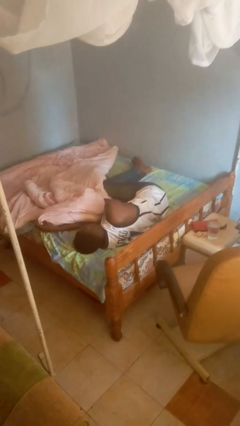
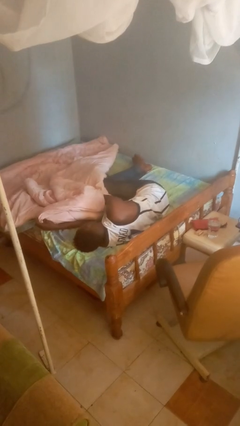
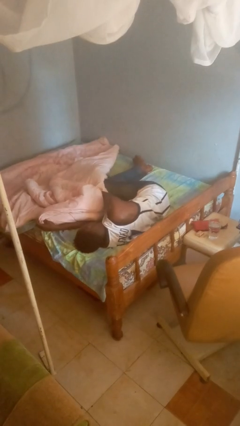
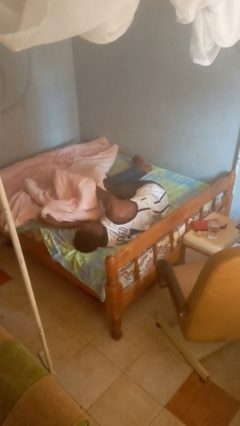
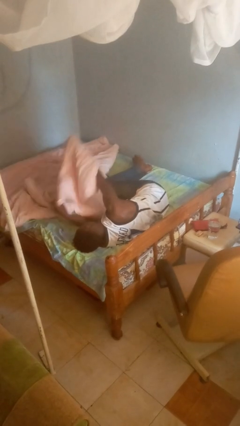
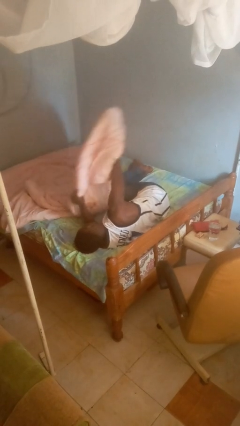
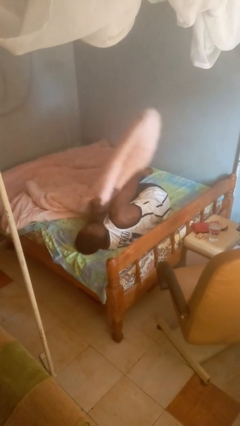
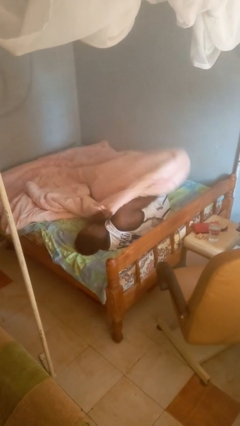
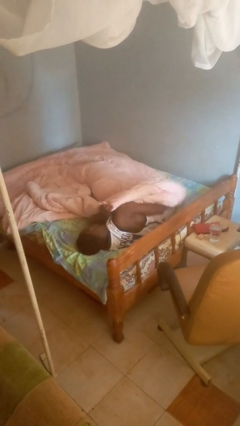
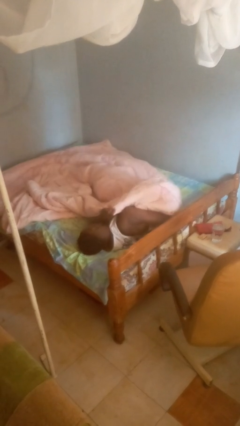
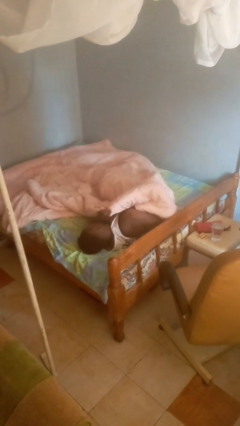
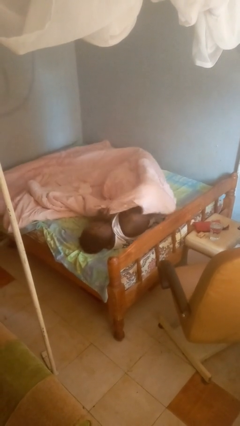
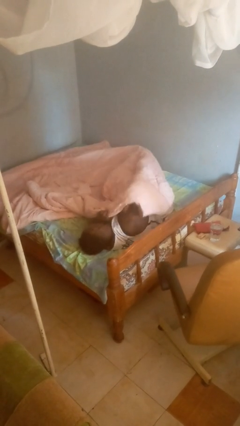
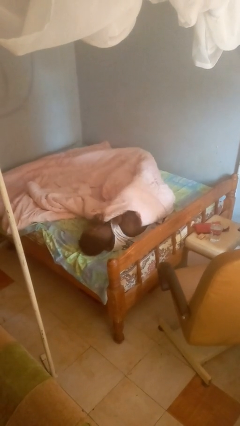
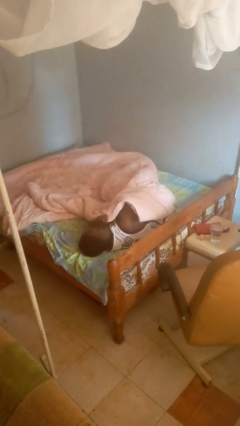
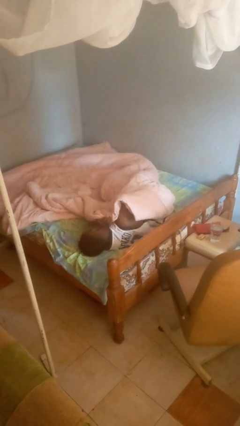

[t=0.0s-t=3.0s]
person covers with blanket

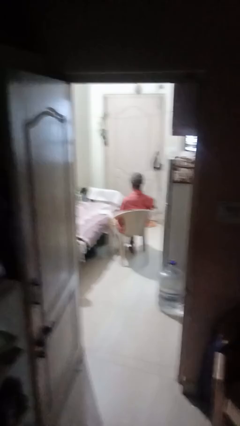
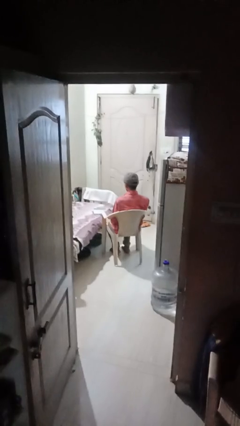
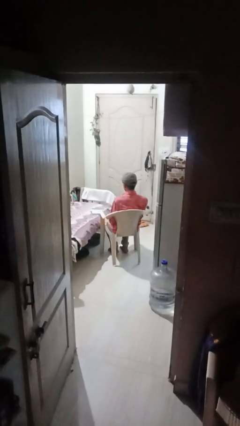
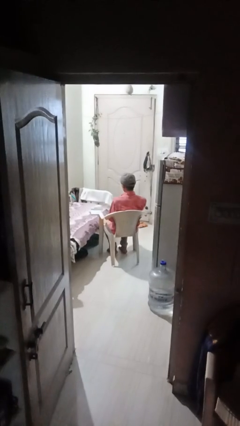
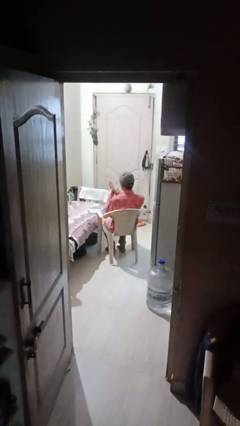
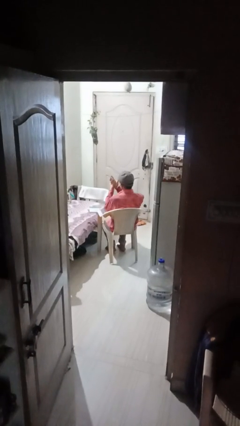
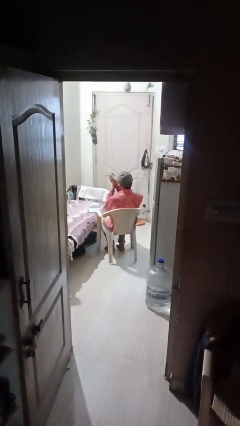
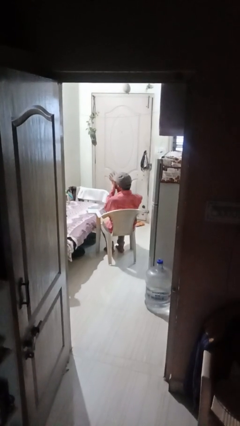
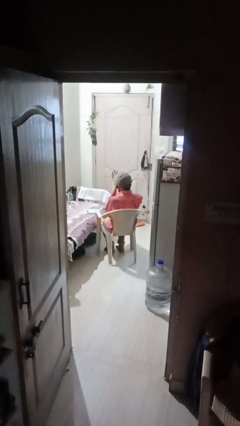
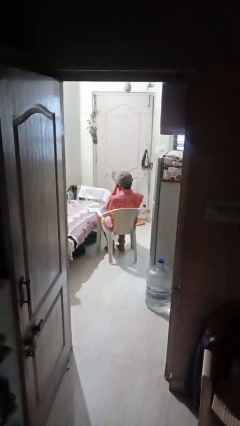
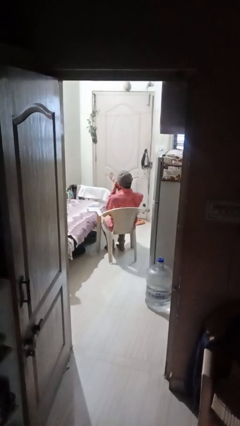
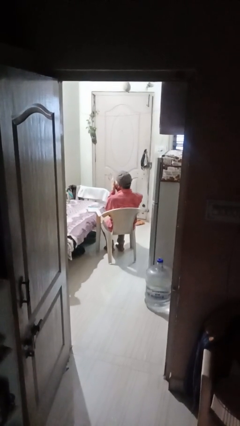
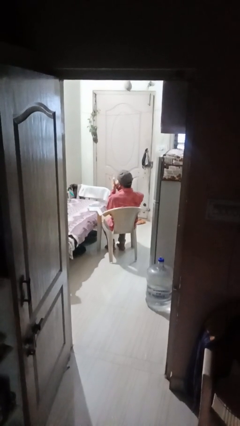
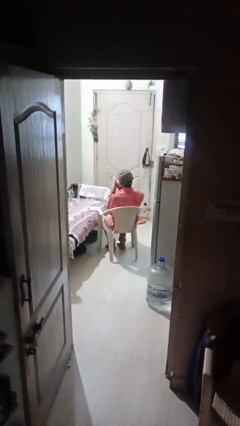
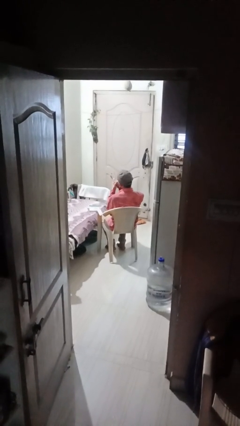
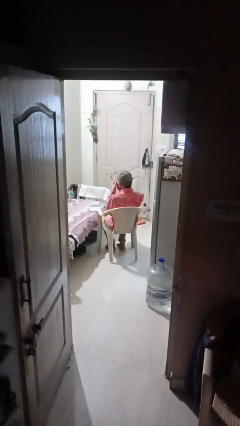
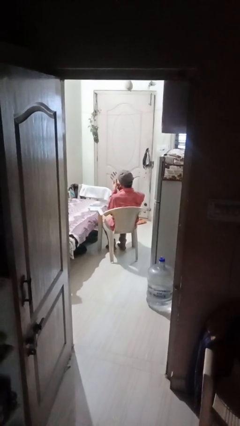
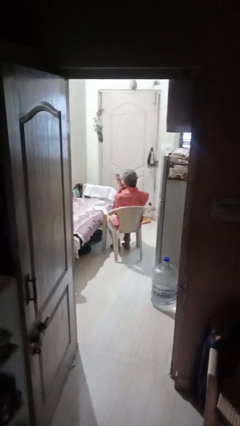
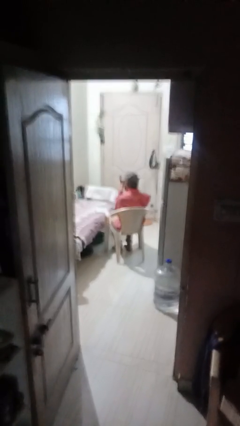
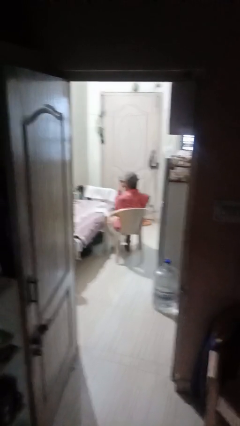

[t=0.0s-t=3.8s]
person looks at hands in lap

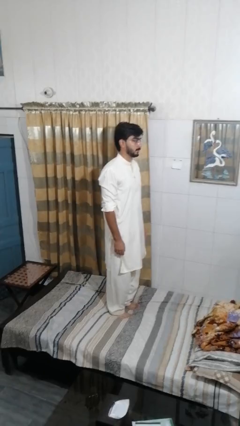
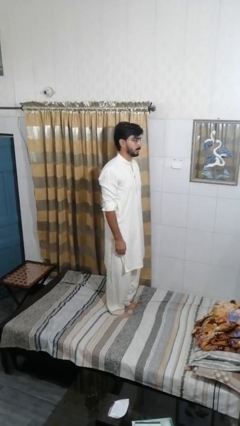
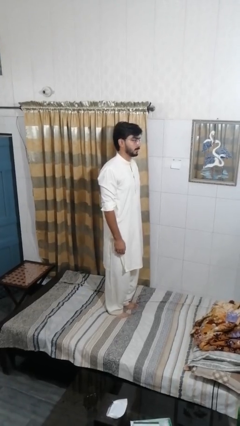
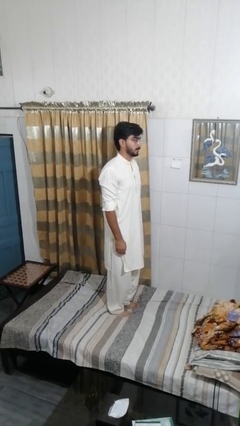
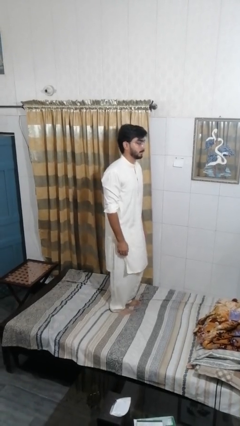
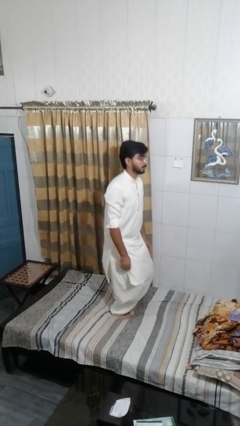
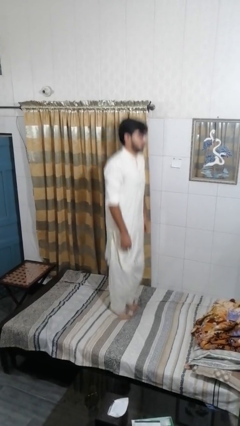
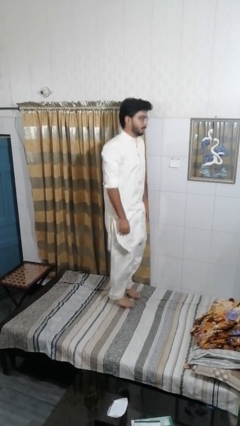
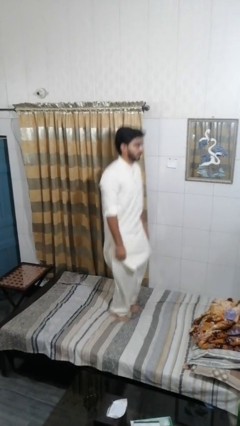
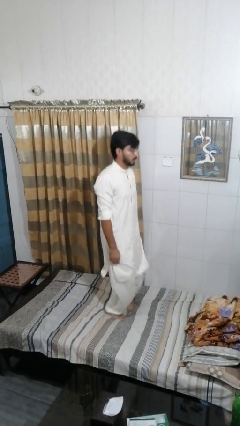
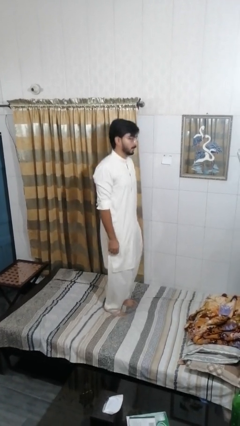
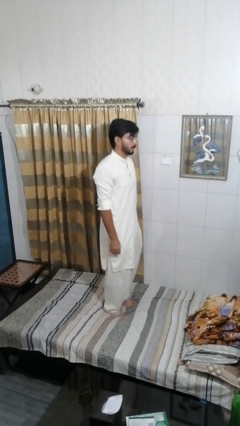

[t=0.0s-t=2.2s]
person jumps on bed

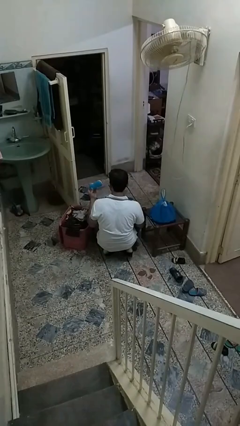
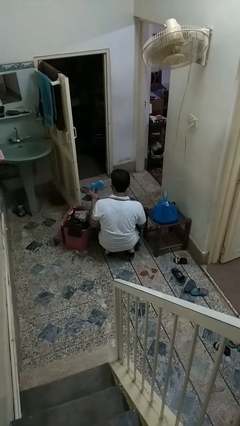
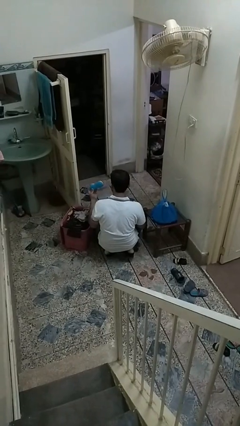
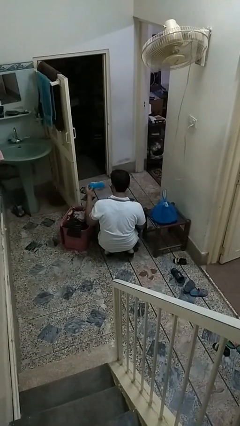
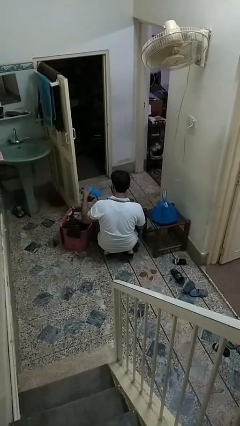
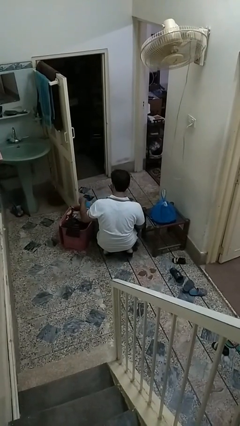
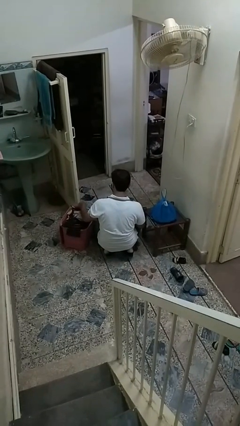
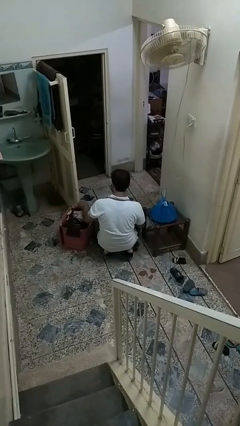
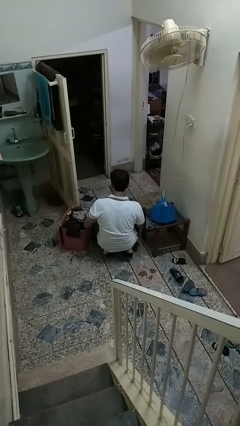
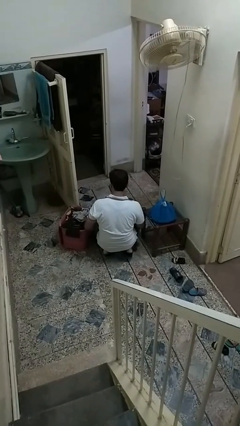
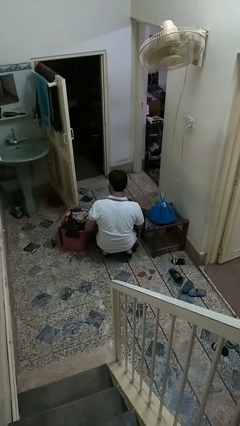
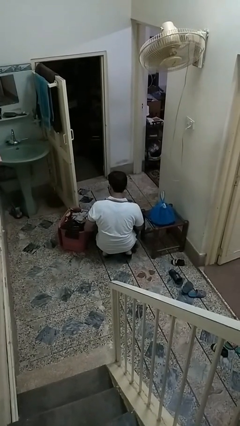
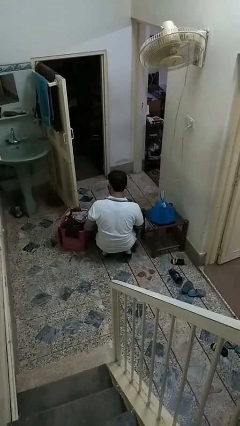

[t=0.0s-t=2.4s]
person puts object into basket

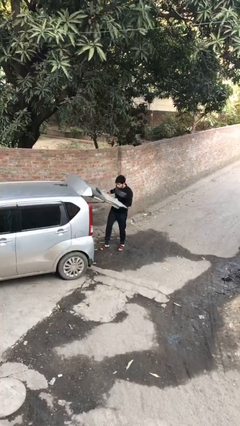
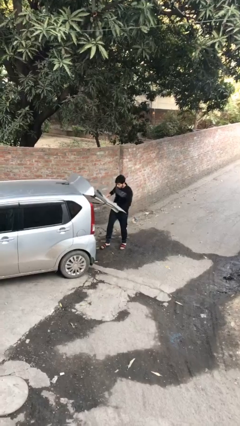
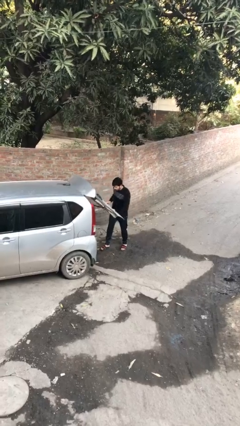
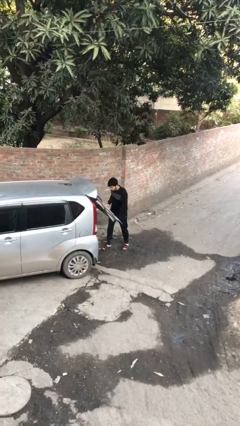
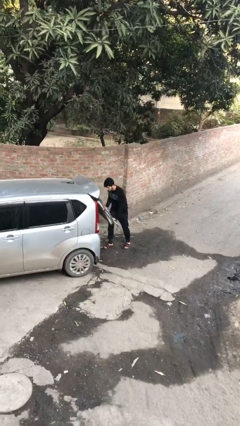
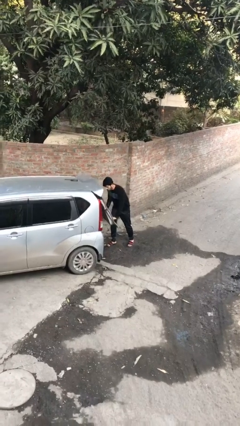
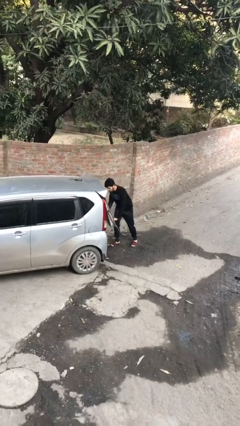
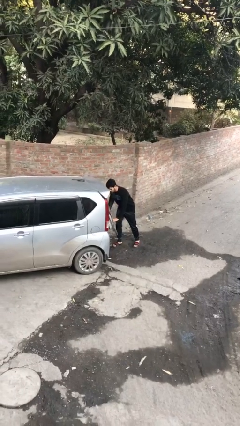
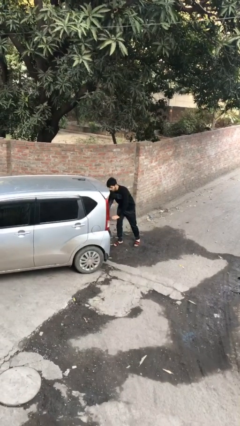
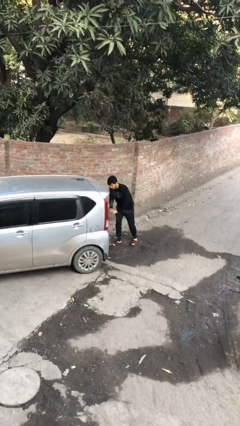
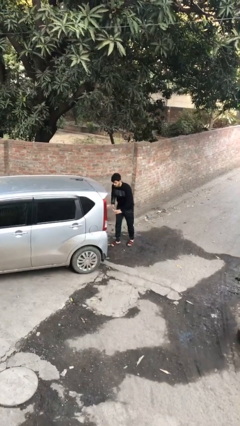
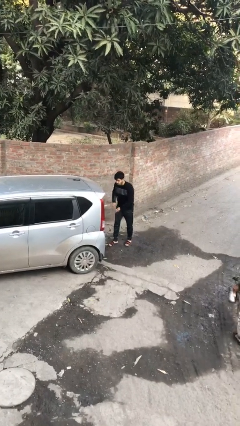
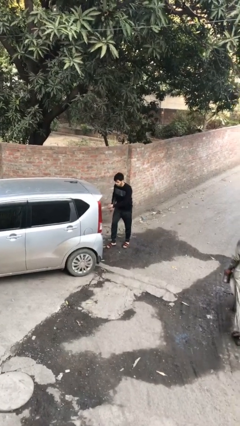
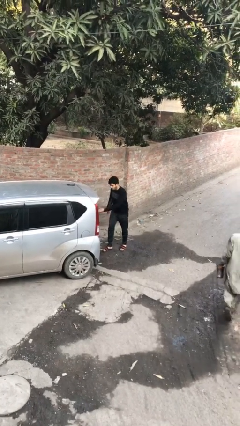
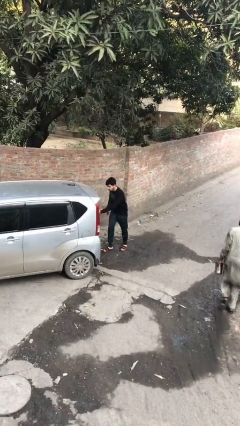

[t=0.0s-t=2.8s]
person closes car trunk

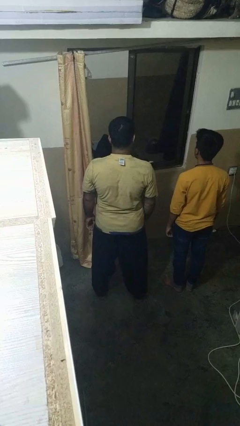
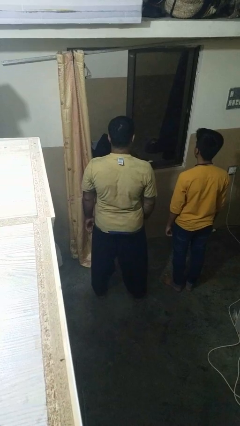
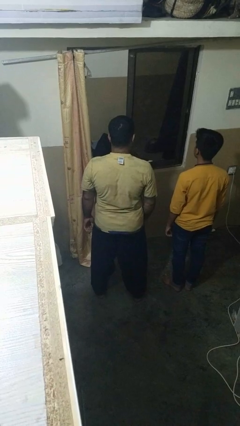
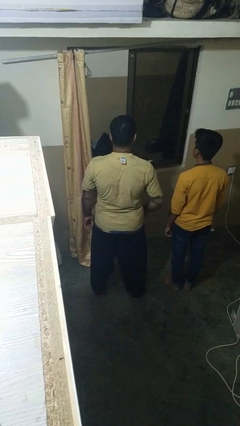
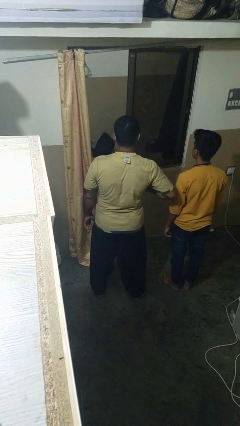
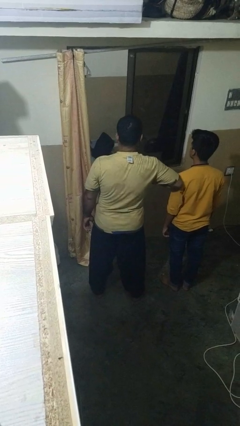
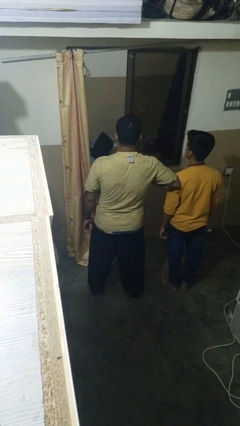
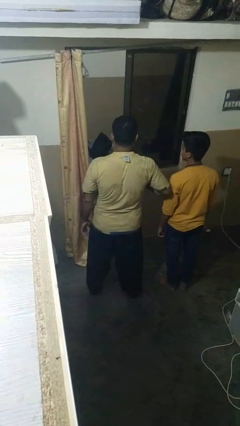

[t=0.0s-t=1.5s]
person nudges person with elbow

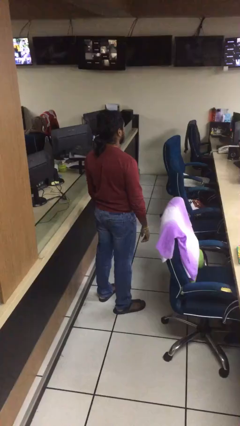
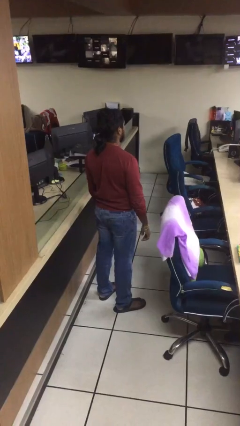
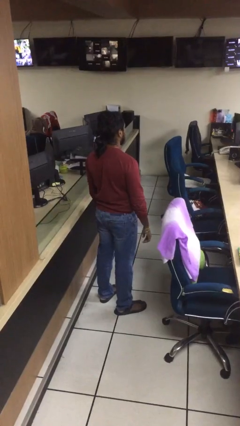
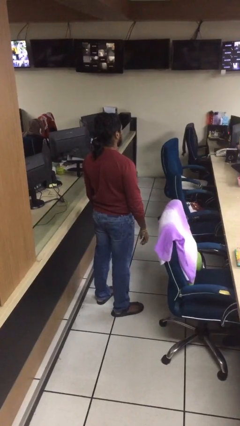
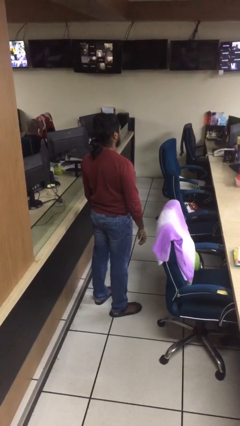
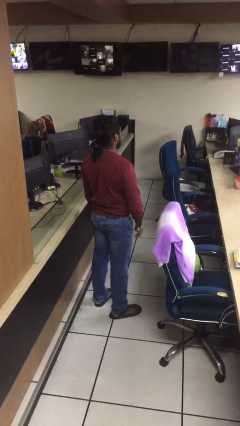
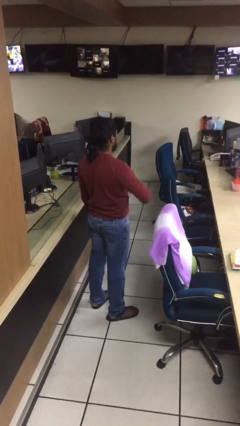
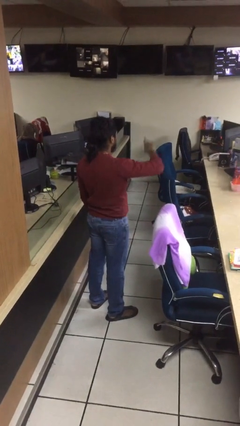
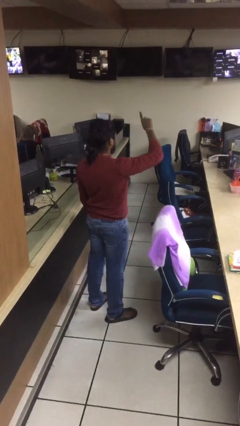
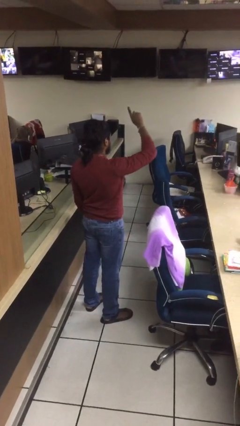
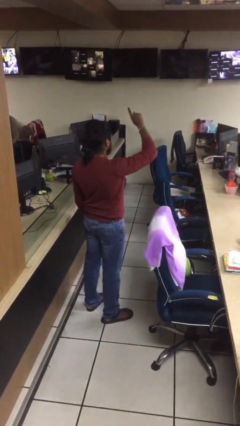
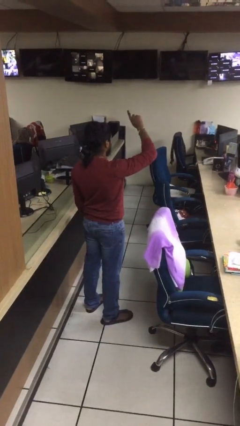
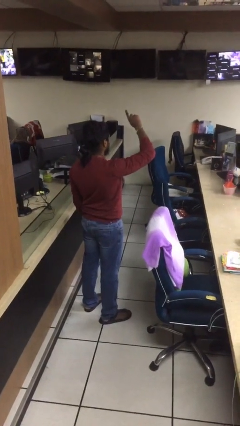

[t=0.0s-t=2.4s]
person gestures swipe up
